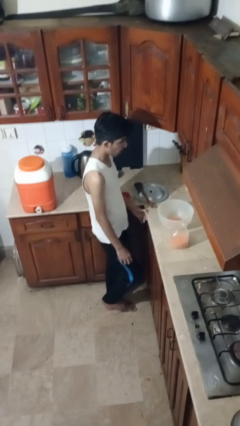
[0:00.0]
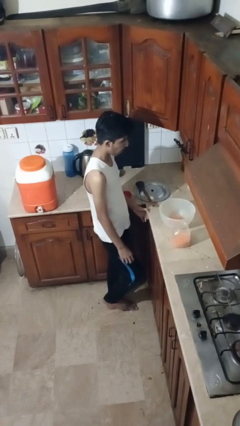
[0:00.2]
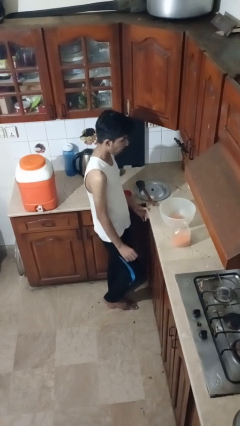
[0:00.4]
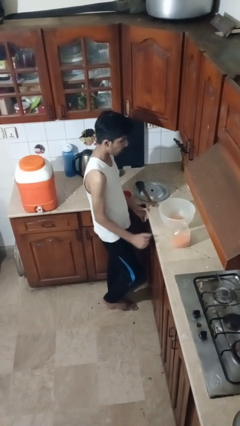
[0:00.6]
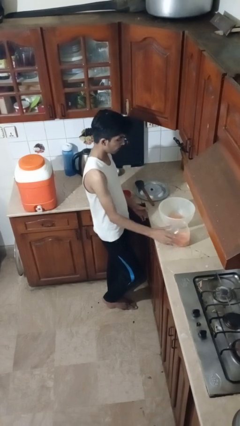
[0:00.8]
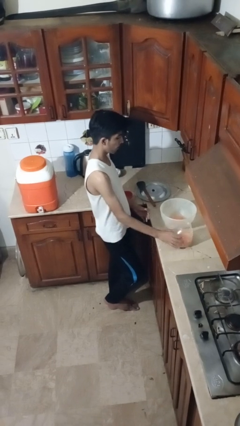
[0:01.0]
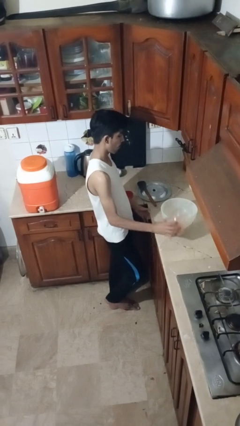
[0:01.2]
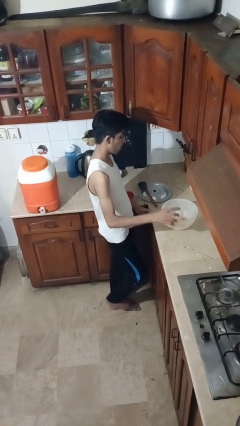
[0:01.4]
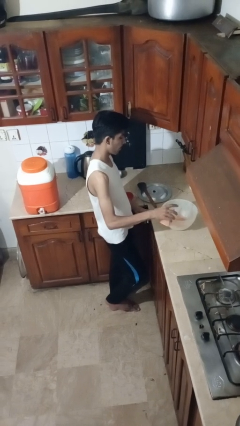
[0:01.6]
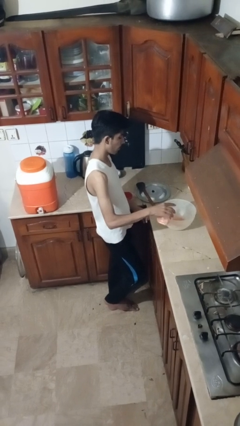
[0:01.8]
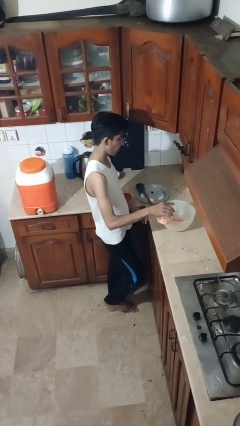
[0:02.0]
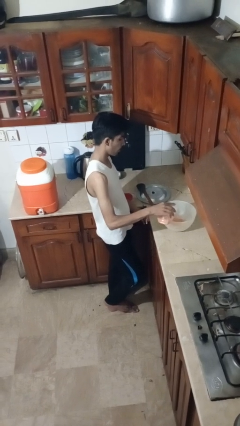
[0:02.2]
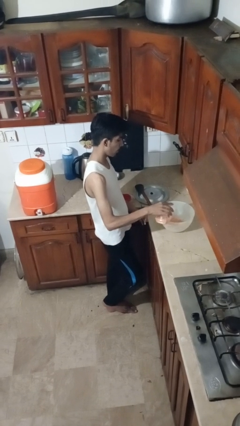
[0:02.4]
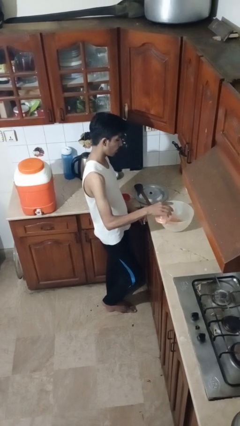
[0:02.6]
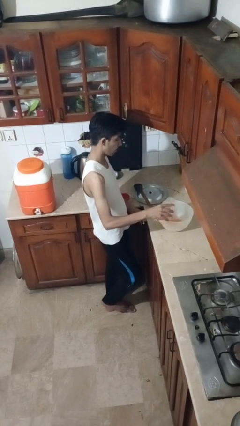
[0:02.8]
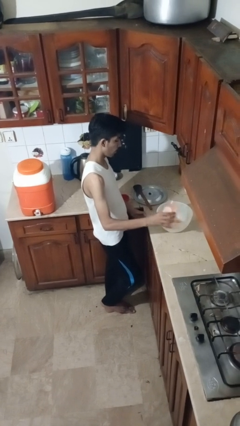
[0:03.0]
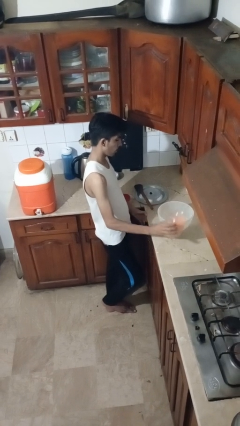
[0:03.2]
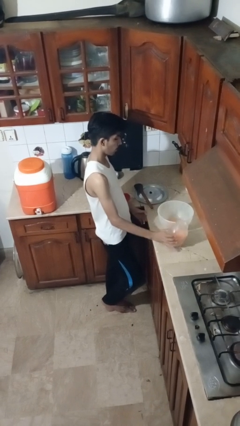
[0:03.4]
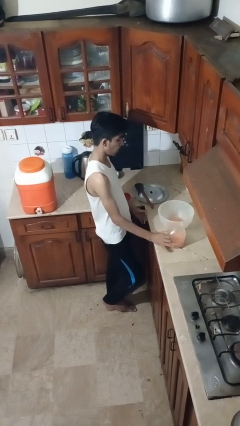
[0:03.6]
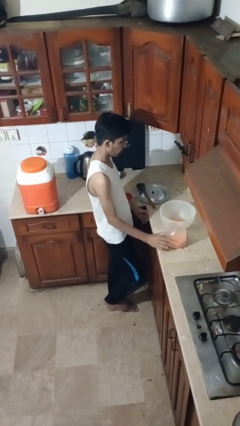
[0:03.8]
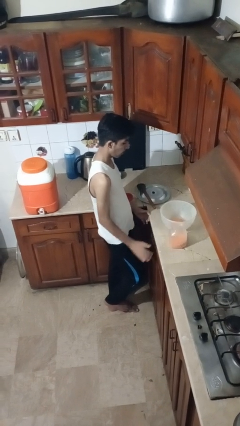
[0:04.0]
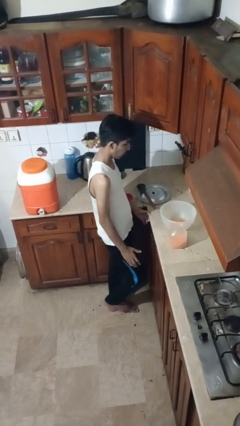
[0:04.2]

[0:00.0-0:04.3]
person pours into bowl

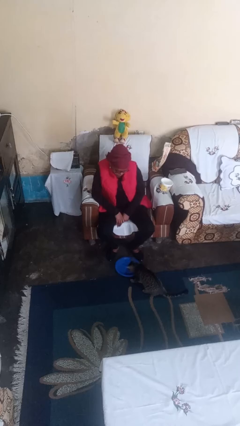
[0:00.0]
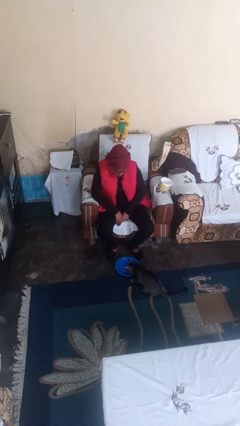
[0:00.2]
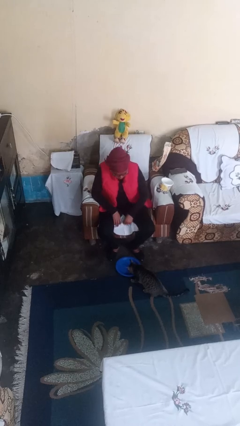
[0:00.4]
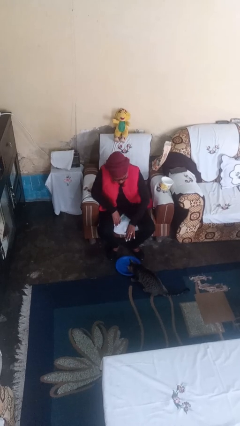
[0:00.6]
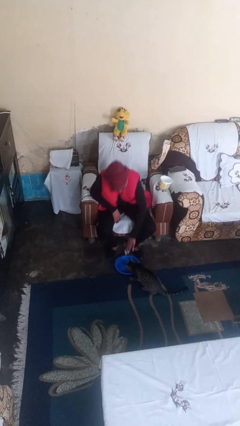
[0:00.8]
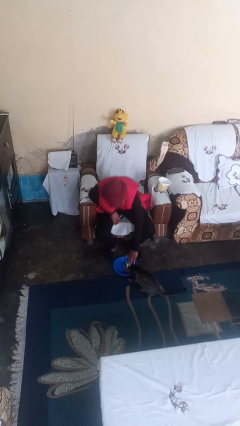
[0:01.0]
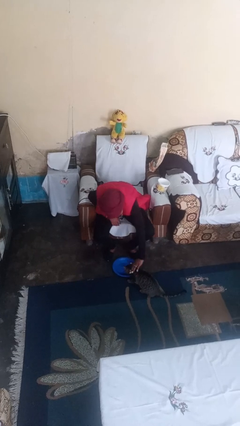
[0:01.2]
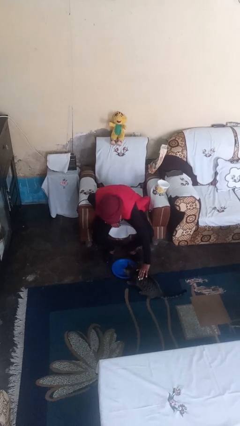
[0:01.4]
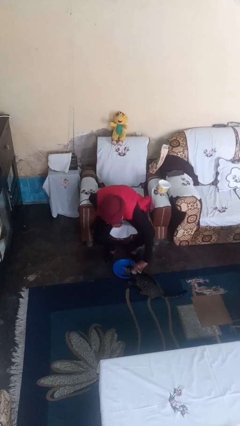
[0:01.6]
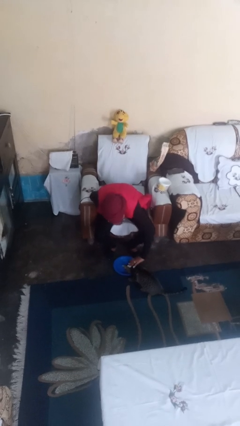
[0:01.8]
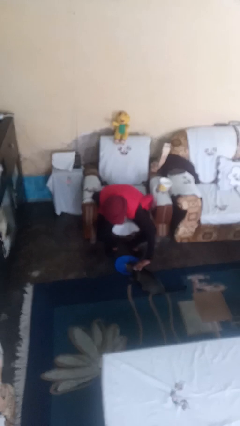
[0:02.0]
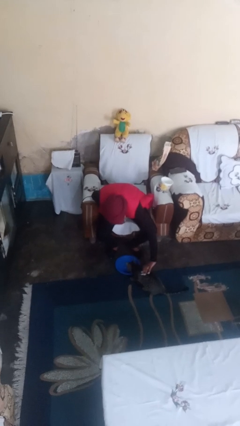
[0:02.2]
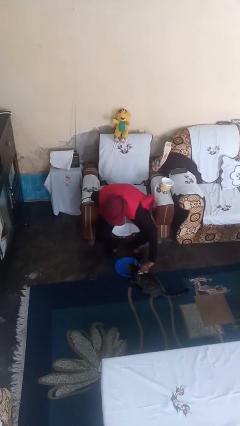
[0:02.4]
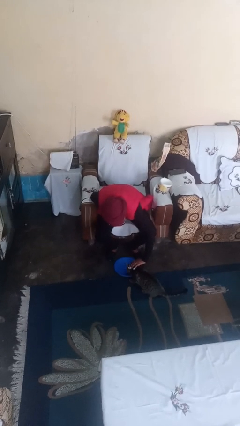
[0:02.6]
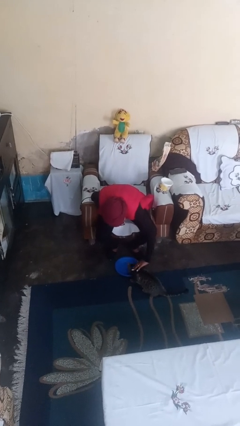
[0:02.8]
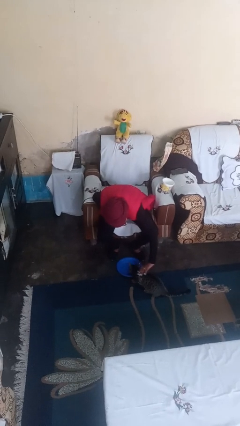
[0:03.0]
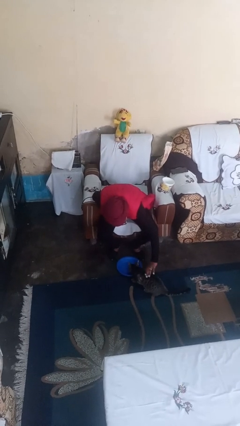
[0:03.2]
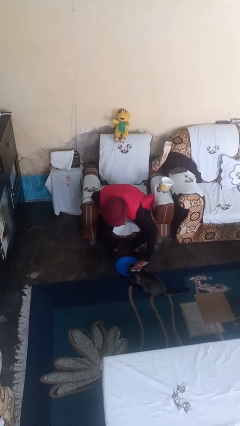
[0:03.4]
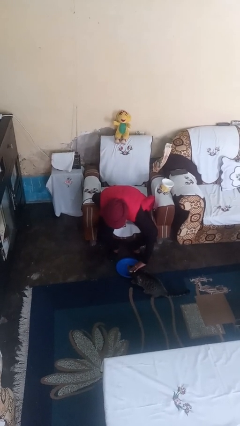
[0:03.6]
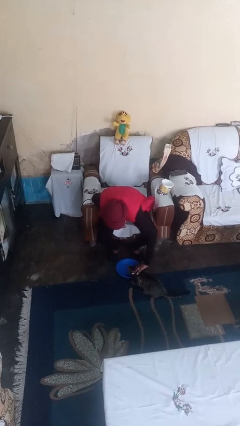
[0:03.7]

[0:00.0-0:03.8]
person pets cat

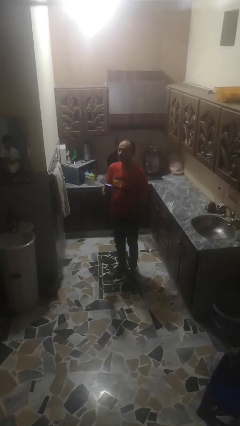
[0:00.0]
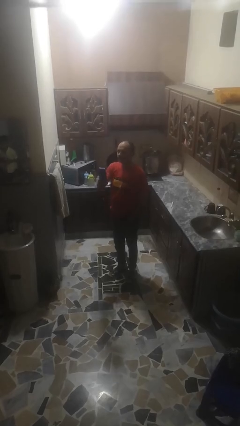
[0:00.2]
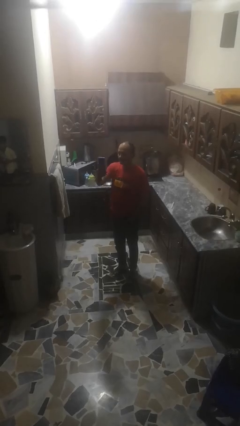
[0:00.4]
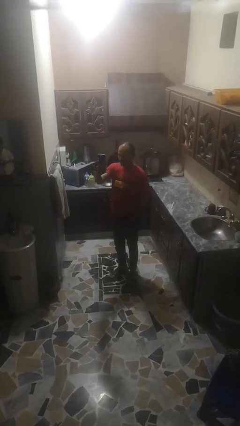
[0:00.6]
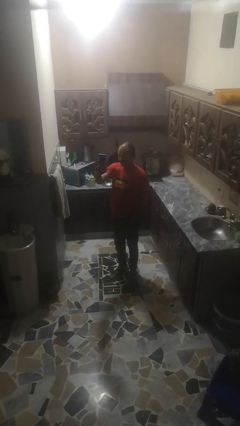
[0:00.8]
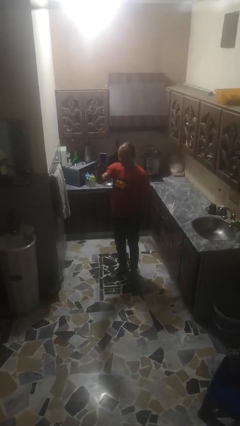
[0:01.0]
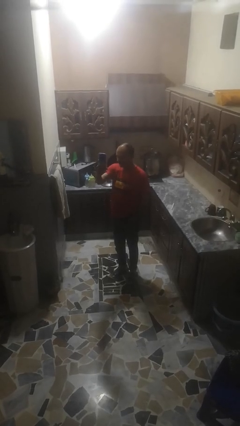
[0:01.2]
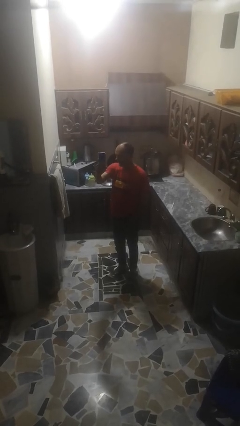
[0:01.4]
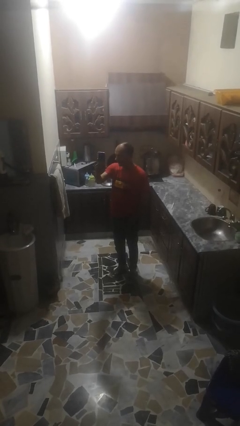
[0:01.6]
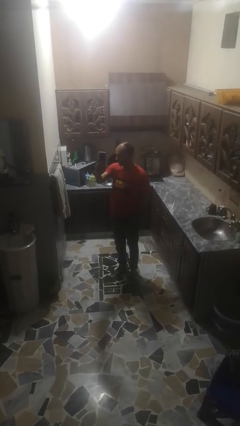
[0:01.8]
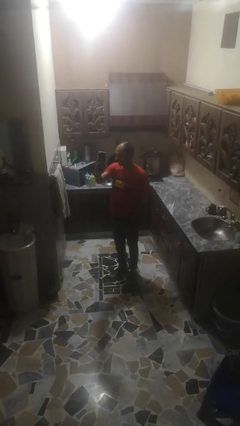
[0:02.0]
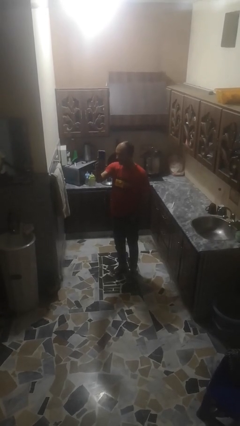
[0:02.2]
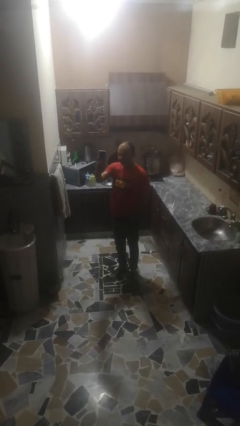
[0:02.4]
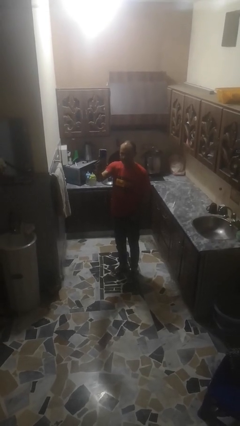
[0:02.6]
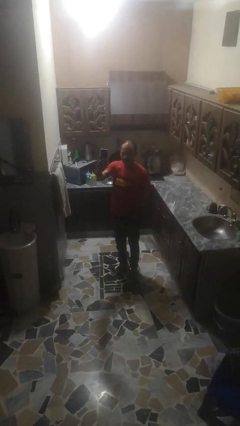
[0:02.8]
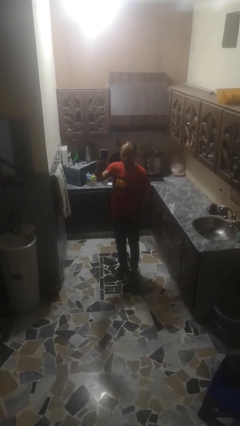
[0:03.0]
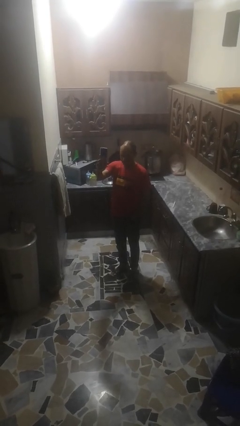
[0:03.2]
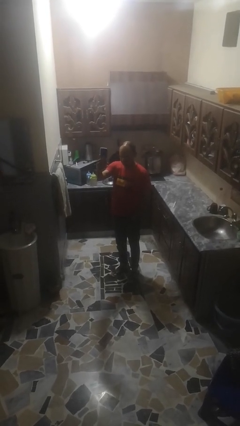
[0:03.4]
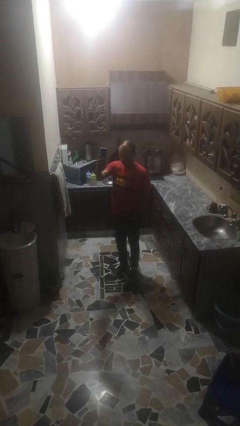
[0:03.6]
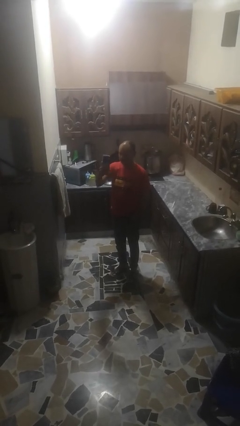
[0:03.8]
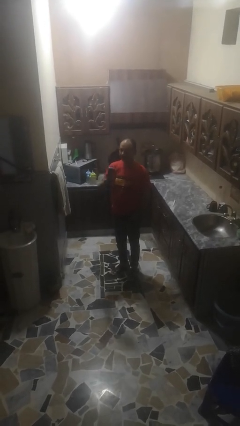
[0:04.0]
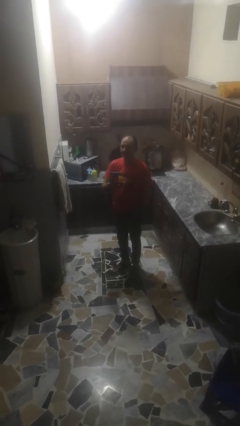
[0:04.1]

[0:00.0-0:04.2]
person takes selfie

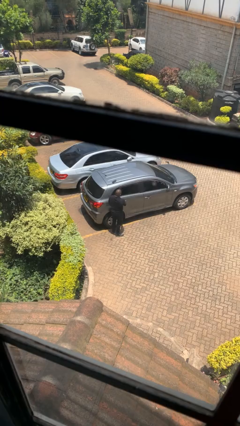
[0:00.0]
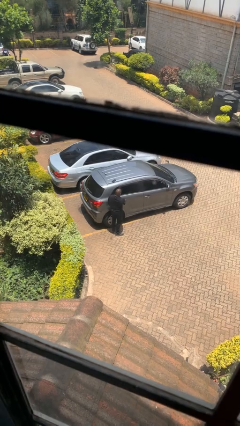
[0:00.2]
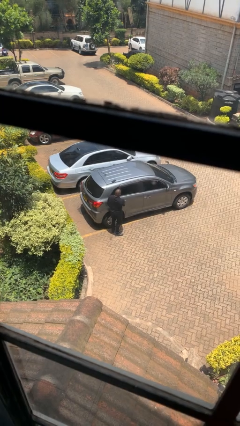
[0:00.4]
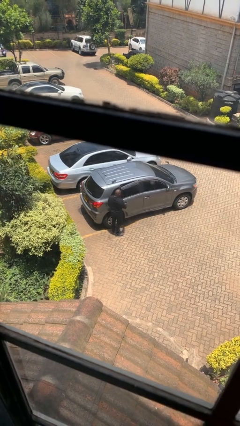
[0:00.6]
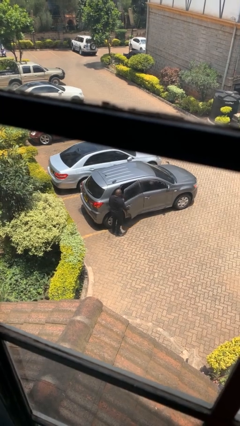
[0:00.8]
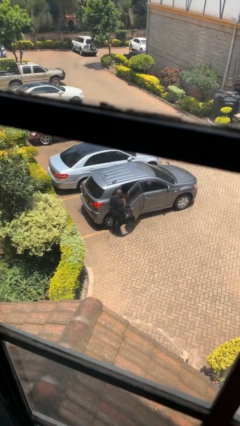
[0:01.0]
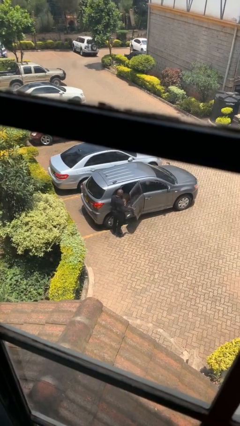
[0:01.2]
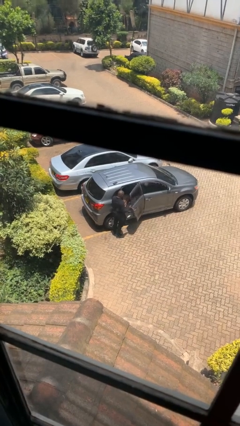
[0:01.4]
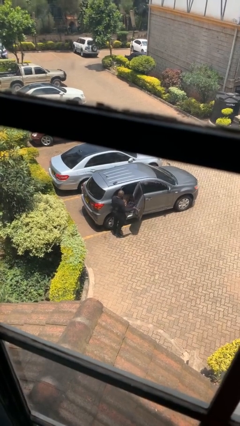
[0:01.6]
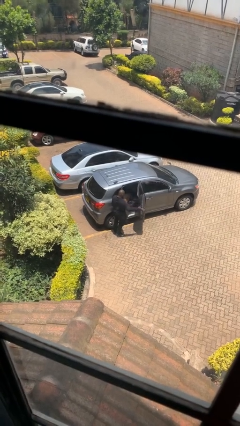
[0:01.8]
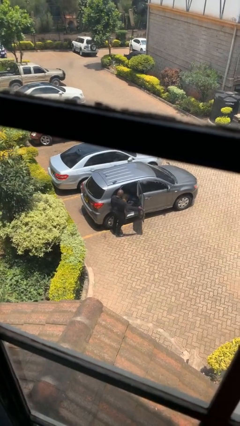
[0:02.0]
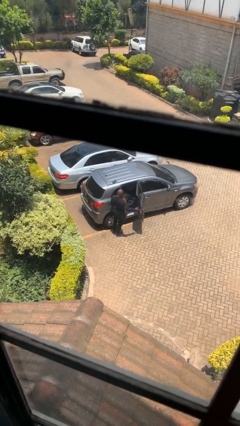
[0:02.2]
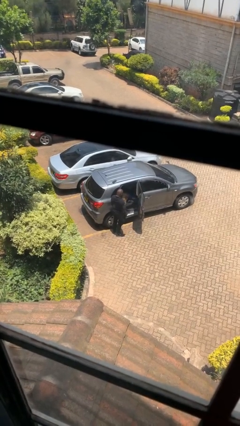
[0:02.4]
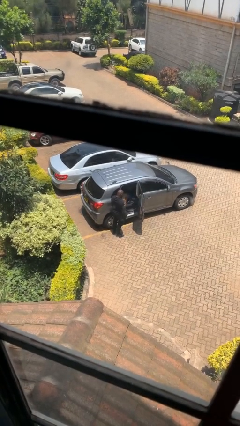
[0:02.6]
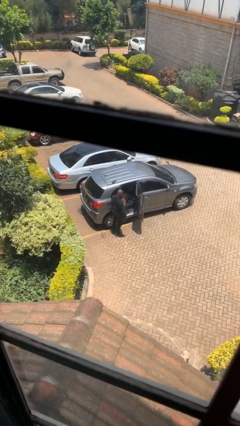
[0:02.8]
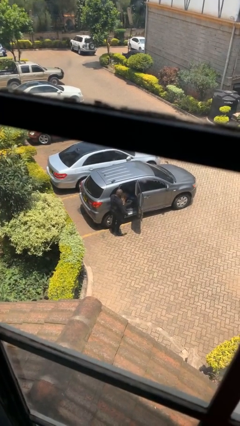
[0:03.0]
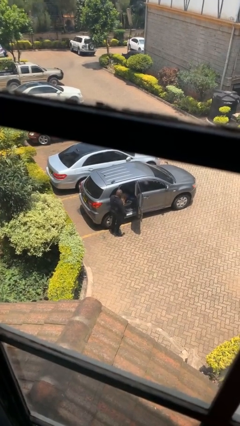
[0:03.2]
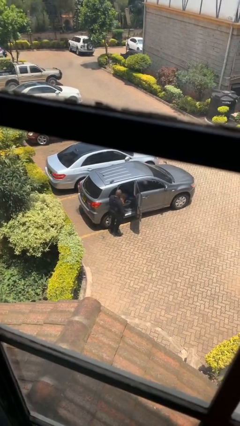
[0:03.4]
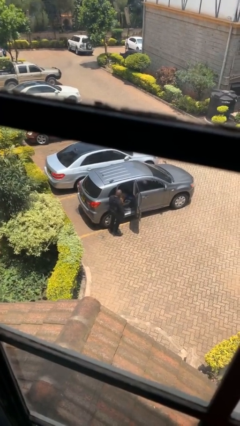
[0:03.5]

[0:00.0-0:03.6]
person opens car door

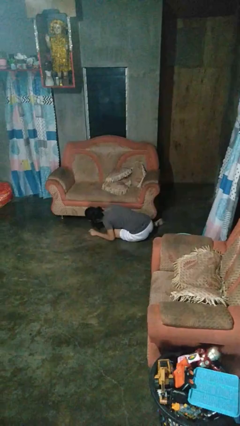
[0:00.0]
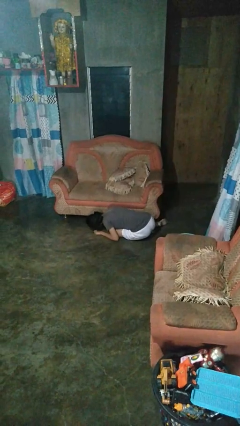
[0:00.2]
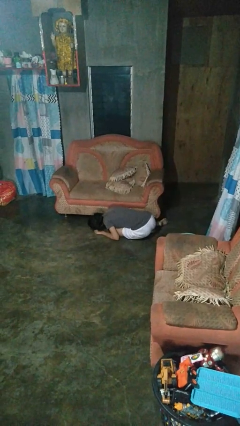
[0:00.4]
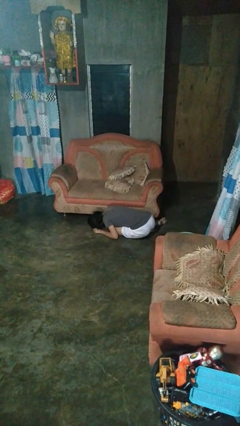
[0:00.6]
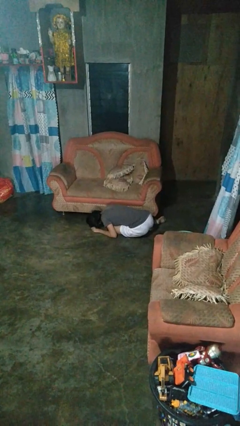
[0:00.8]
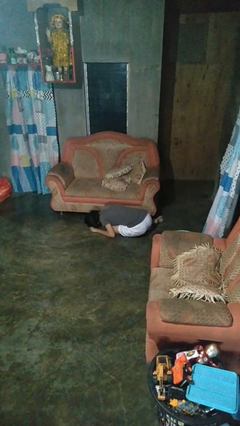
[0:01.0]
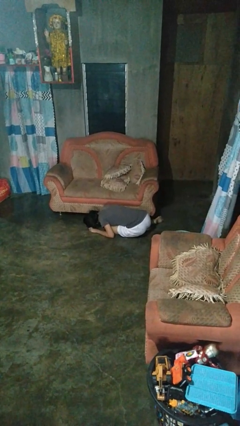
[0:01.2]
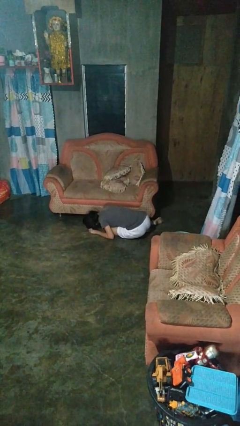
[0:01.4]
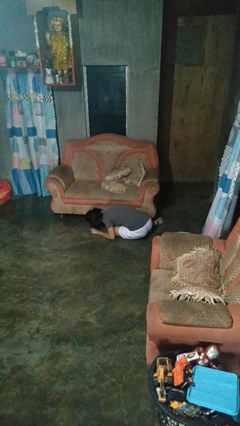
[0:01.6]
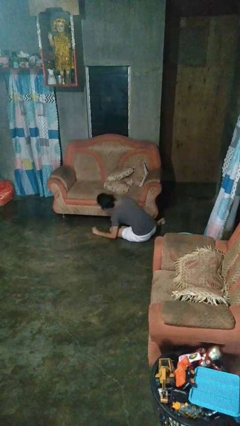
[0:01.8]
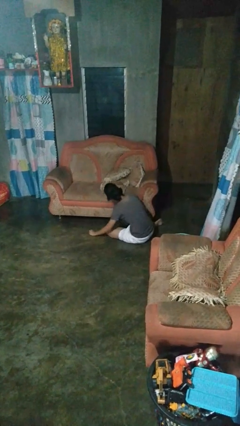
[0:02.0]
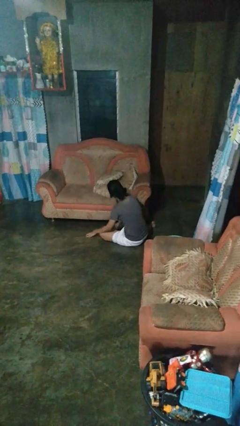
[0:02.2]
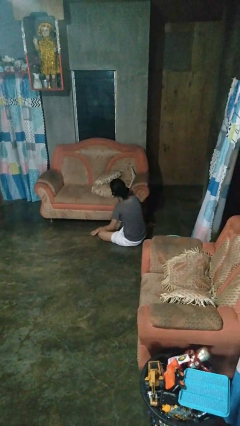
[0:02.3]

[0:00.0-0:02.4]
person searches under couch
